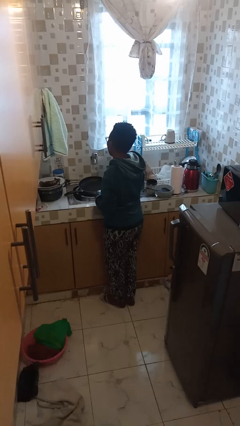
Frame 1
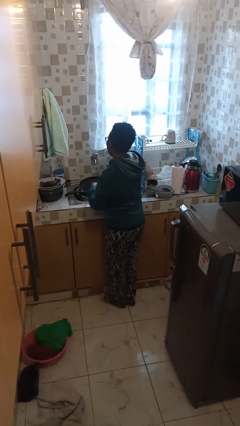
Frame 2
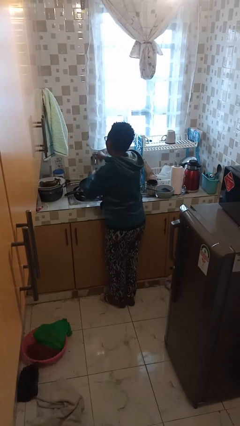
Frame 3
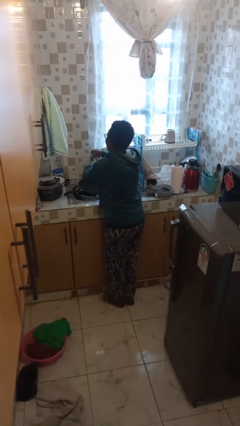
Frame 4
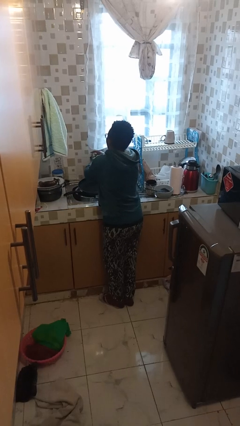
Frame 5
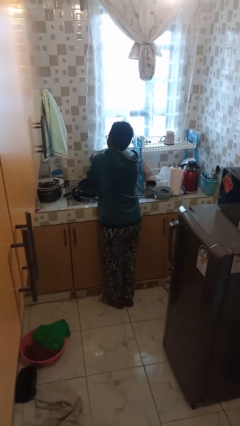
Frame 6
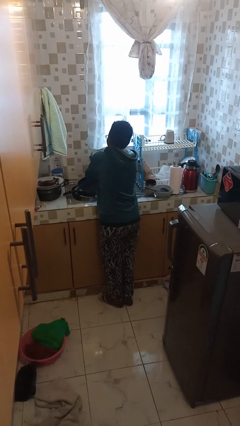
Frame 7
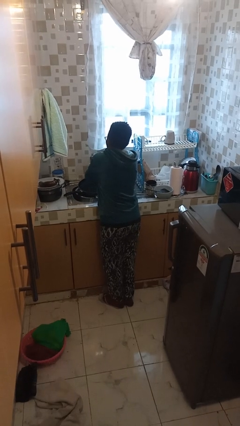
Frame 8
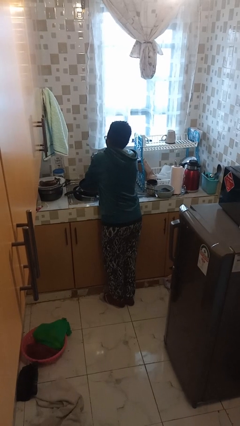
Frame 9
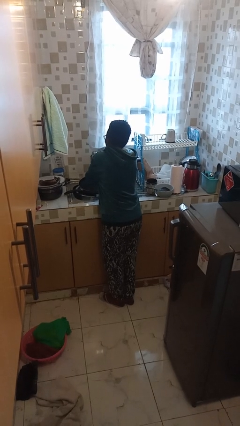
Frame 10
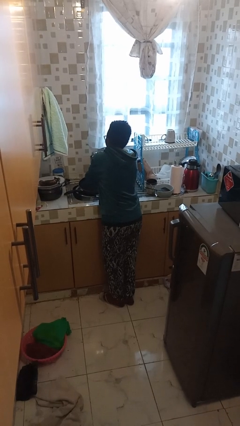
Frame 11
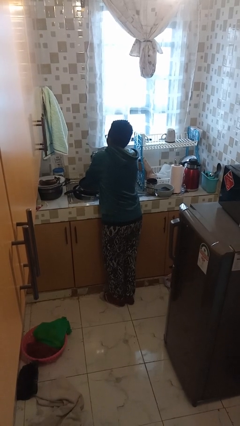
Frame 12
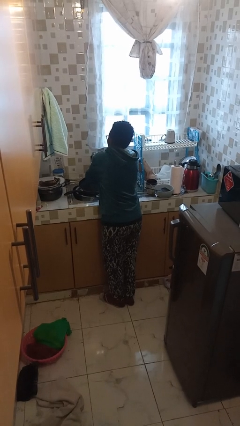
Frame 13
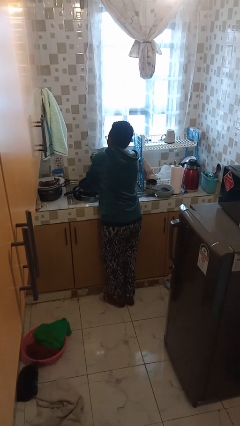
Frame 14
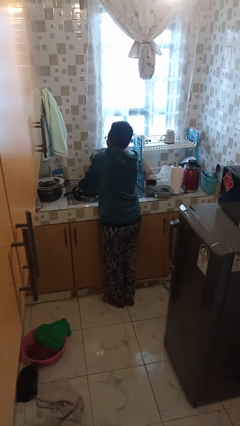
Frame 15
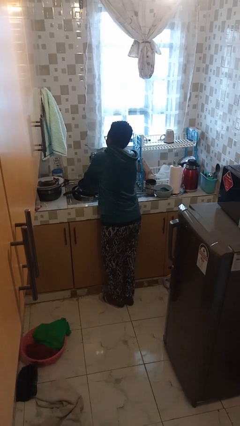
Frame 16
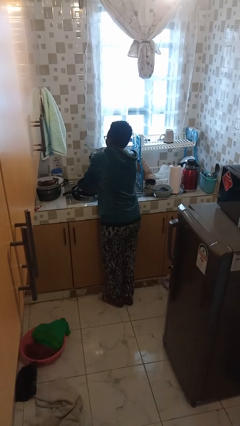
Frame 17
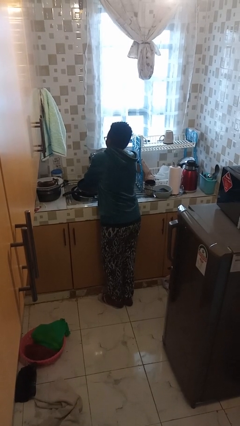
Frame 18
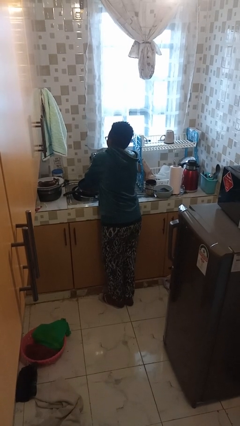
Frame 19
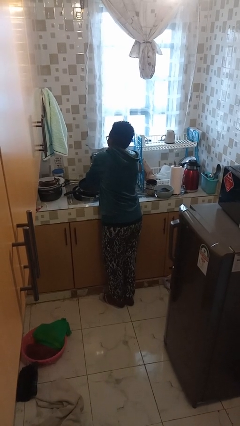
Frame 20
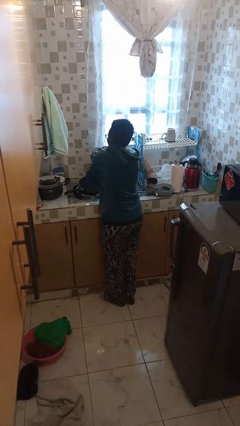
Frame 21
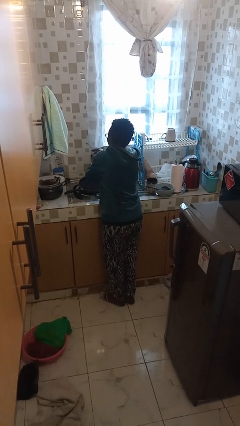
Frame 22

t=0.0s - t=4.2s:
person washes hands

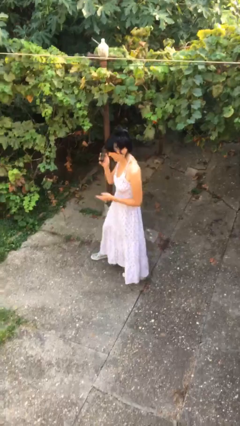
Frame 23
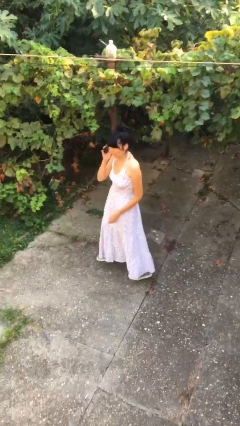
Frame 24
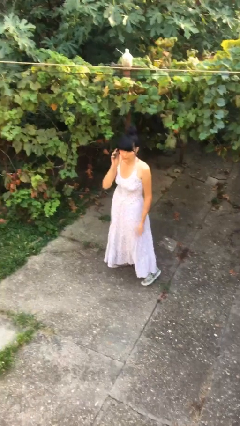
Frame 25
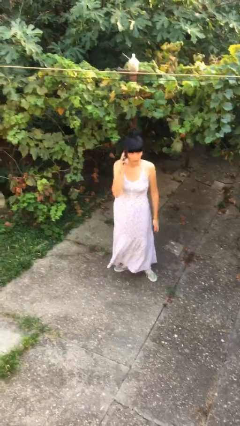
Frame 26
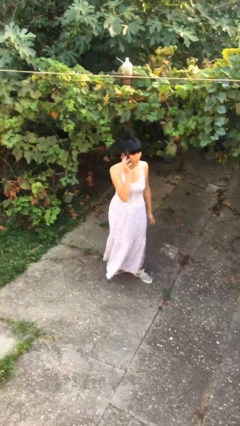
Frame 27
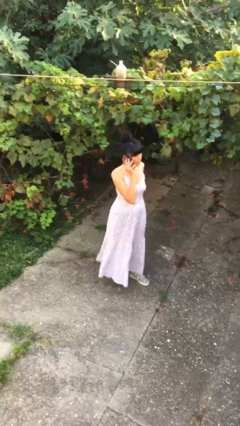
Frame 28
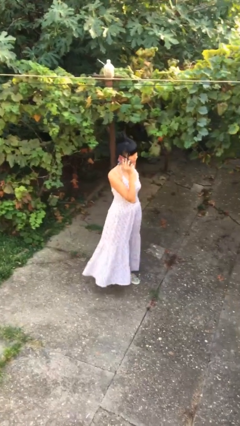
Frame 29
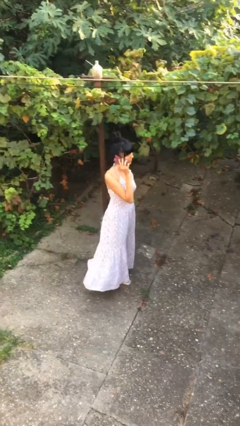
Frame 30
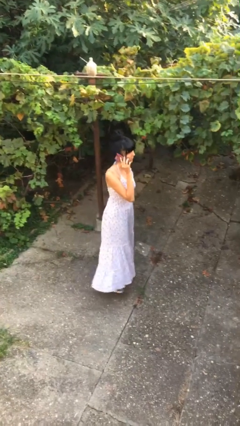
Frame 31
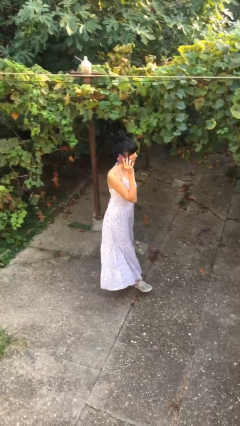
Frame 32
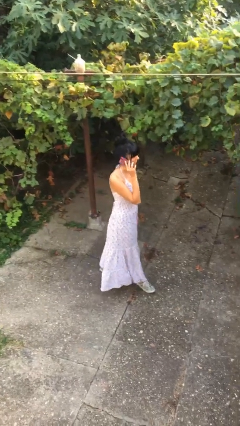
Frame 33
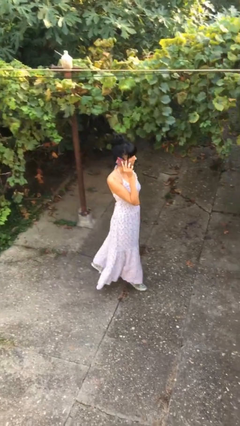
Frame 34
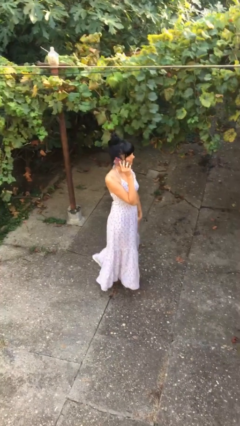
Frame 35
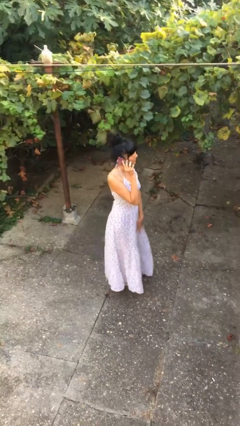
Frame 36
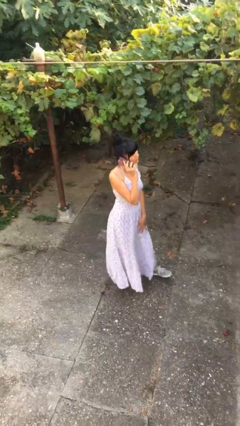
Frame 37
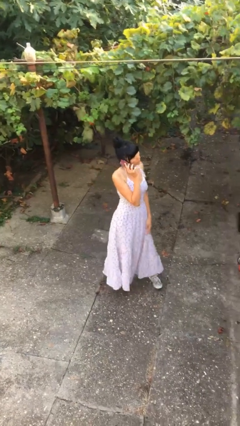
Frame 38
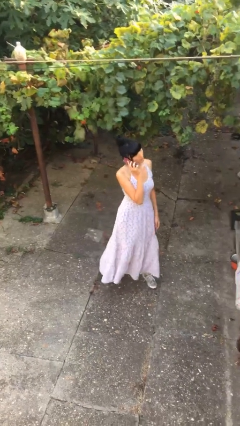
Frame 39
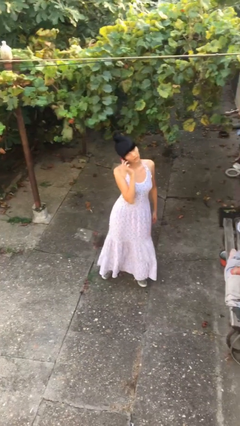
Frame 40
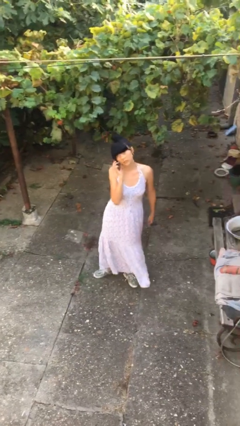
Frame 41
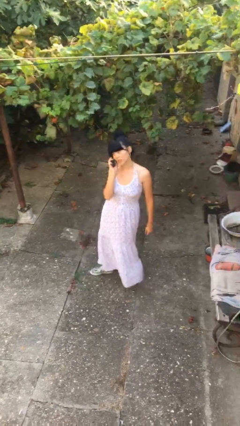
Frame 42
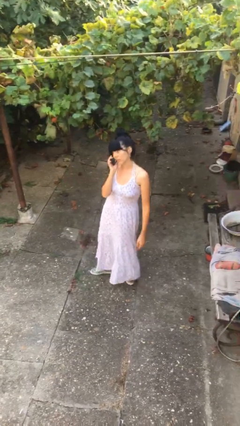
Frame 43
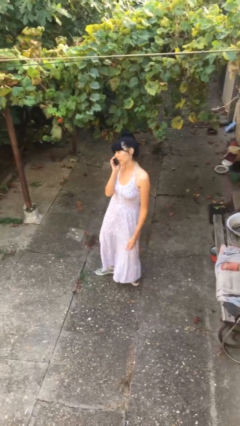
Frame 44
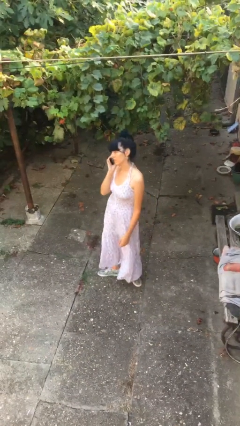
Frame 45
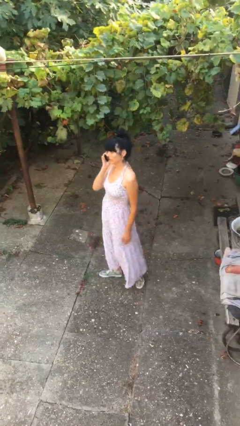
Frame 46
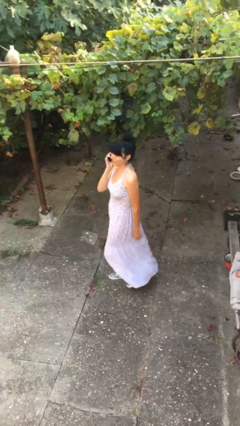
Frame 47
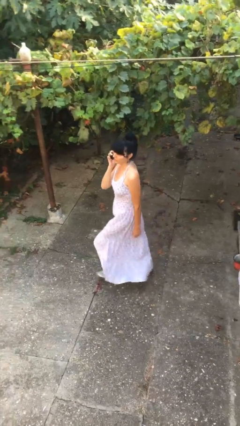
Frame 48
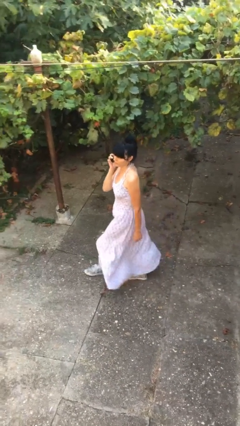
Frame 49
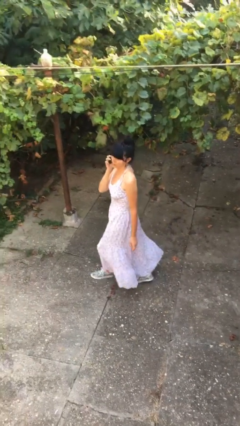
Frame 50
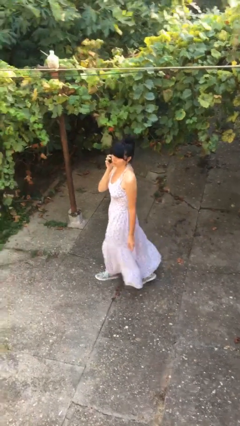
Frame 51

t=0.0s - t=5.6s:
person talks on phone

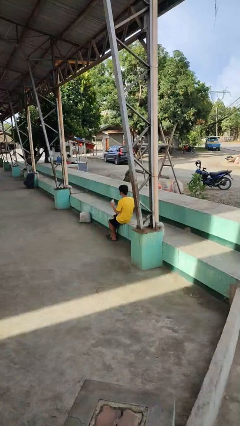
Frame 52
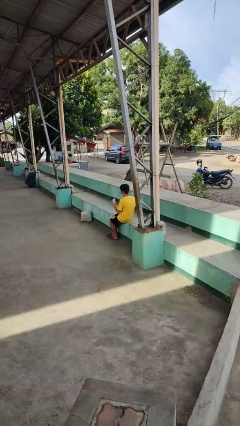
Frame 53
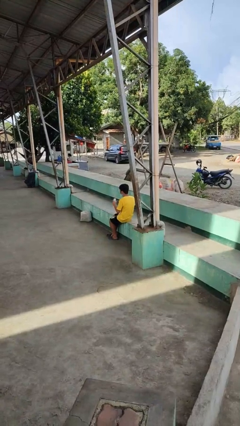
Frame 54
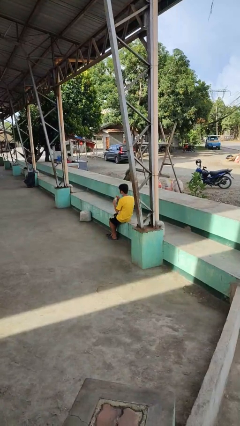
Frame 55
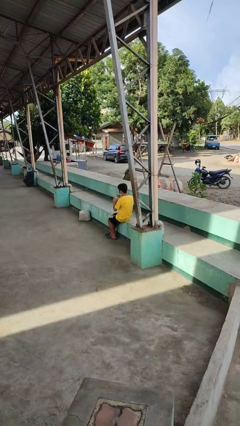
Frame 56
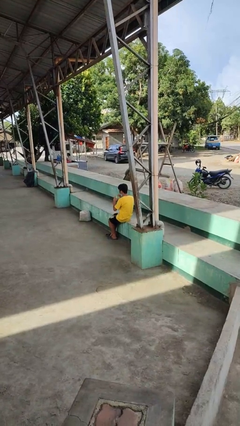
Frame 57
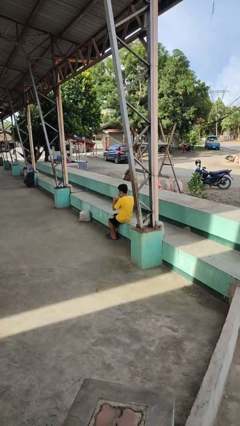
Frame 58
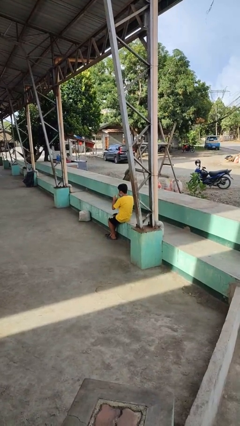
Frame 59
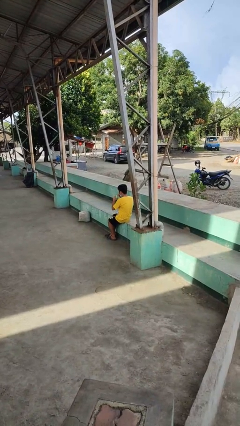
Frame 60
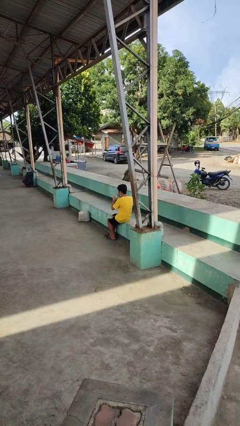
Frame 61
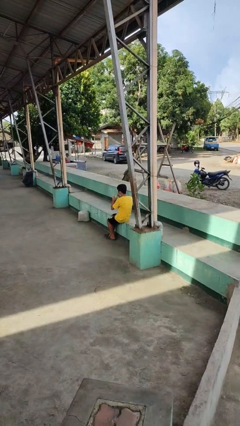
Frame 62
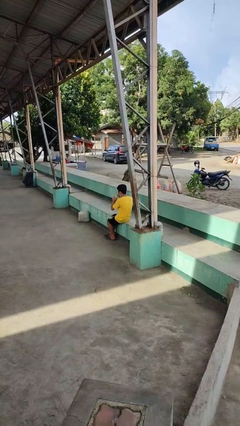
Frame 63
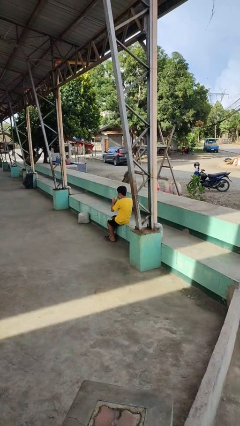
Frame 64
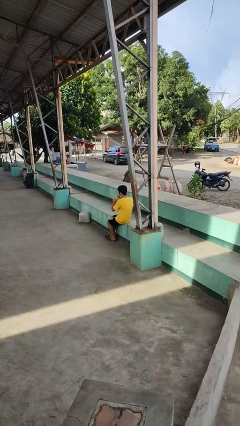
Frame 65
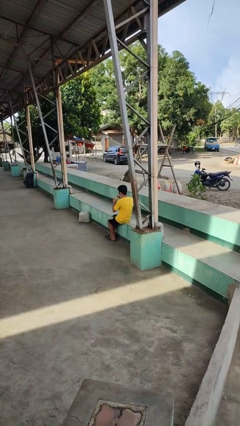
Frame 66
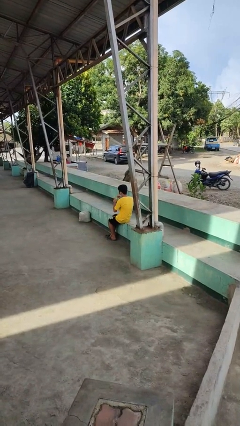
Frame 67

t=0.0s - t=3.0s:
person drinks from straw

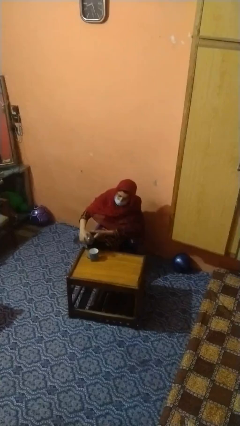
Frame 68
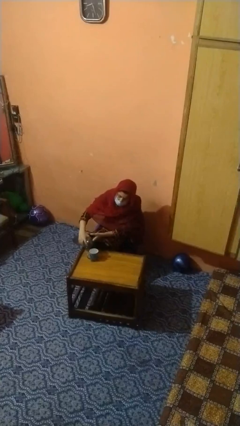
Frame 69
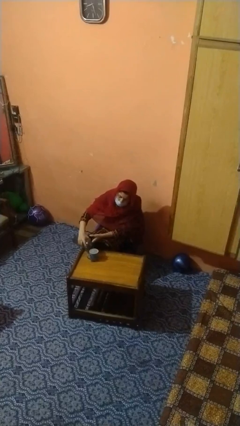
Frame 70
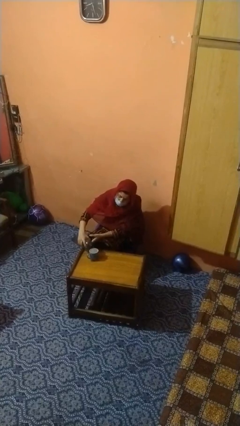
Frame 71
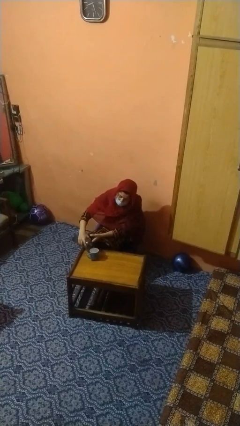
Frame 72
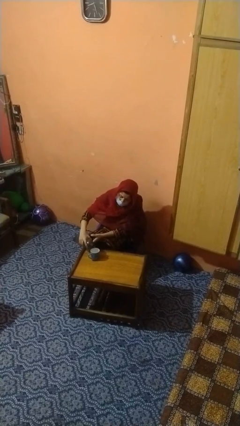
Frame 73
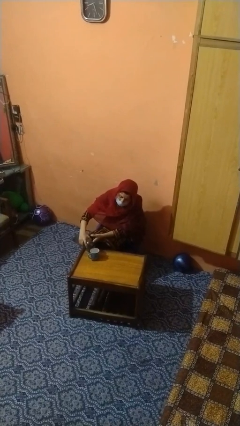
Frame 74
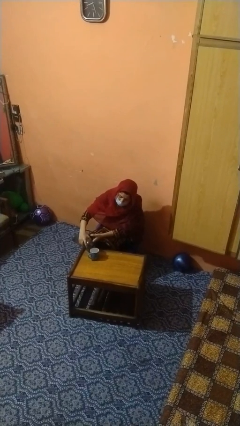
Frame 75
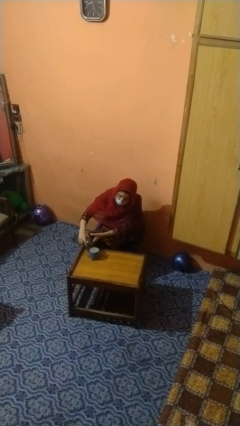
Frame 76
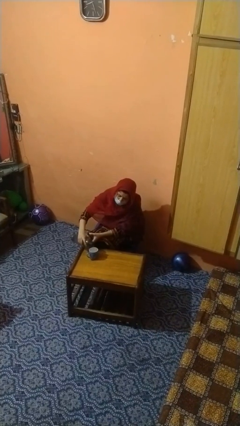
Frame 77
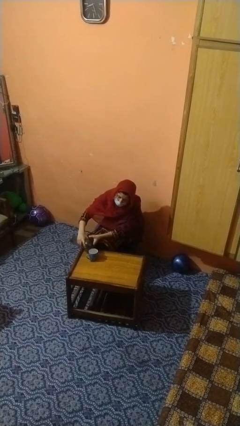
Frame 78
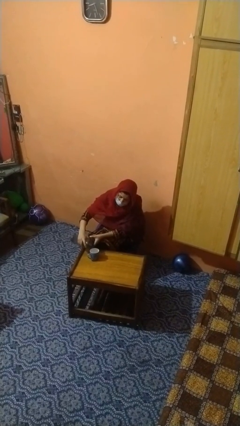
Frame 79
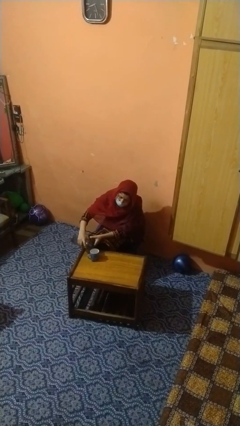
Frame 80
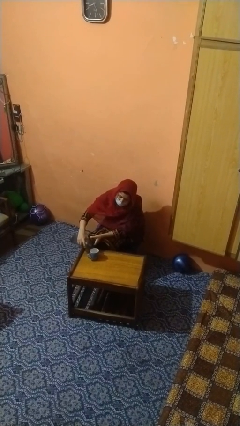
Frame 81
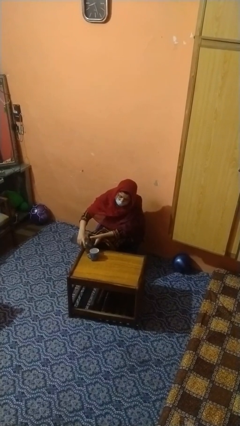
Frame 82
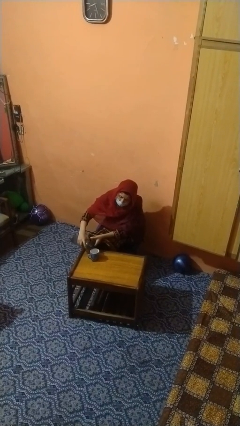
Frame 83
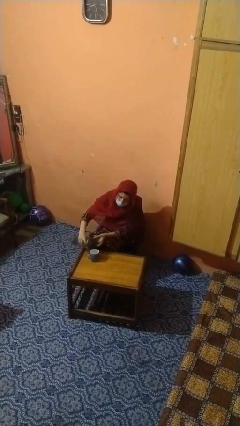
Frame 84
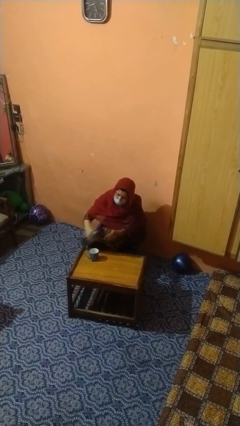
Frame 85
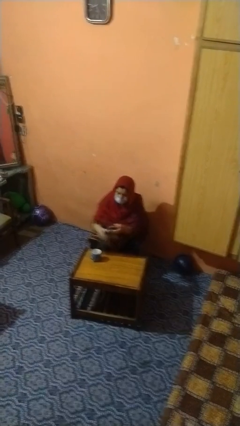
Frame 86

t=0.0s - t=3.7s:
person pours liquid into cup

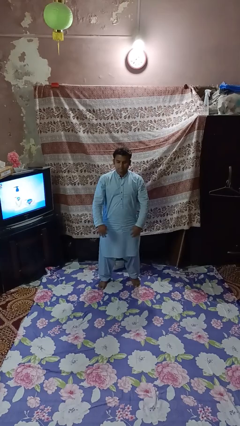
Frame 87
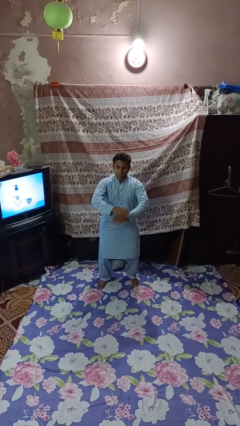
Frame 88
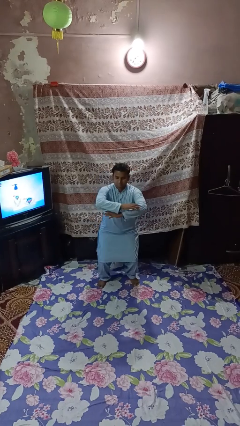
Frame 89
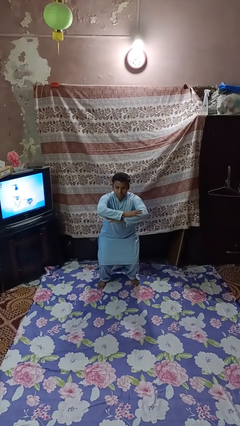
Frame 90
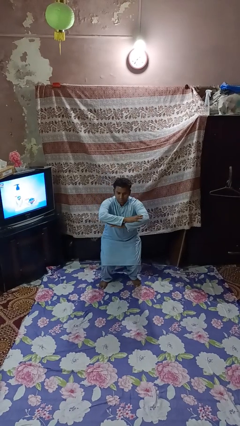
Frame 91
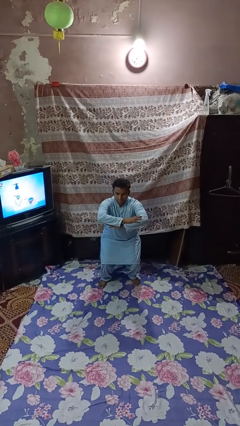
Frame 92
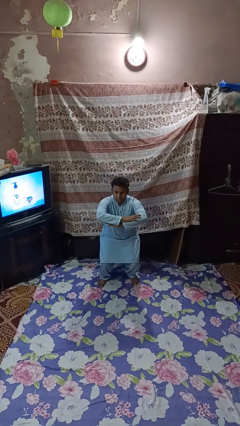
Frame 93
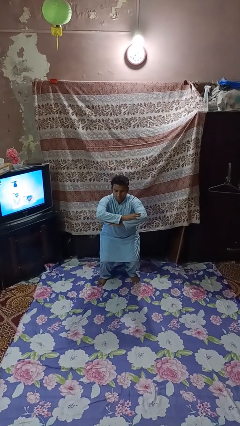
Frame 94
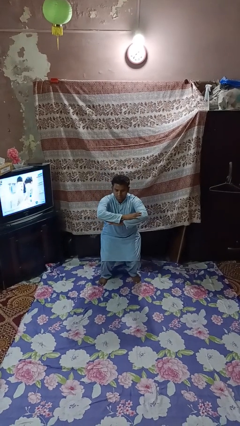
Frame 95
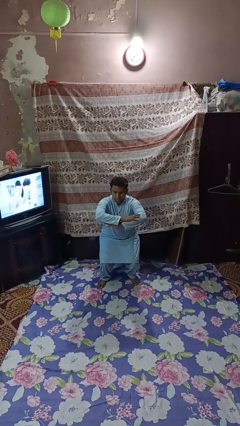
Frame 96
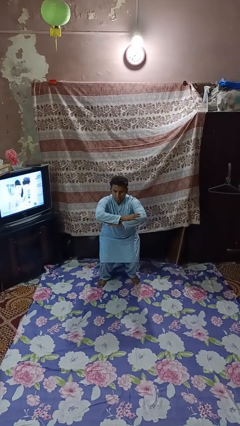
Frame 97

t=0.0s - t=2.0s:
person squats
